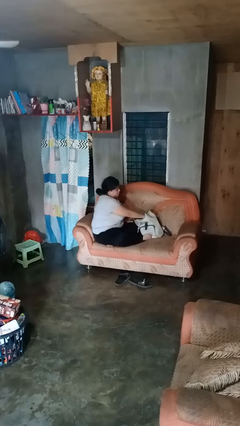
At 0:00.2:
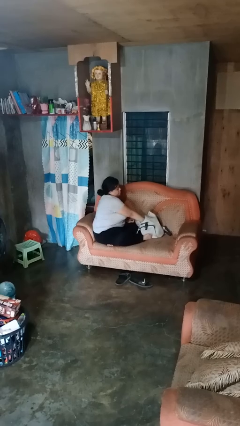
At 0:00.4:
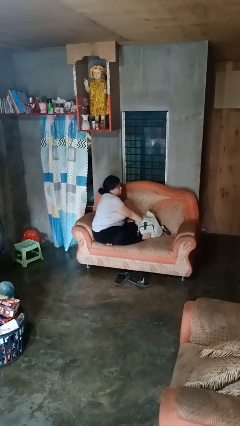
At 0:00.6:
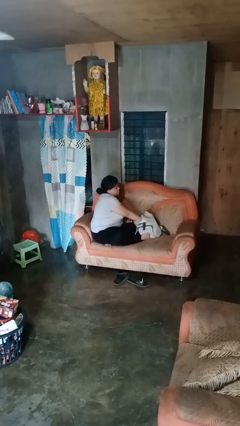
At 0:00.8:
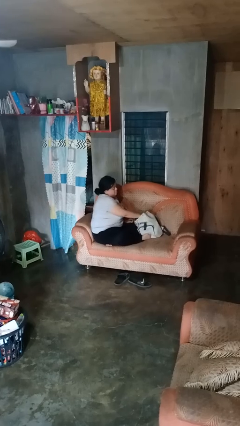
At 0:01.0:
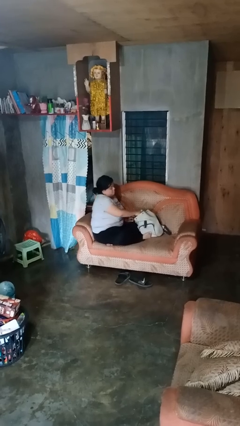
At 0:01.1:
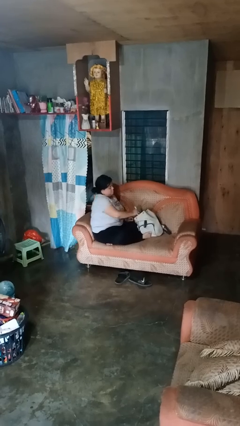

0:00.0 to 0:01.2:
person takes object from backpack

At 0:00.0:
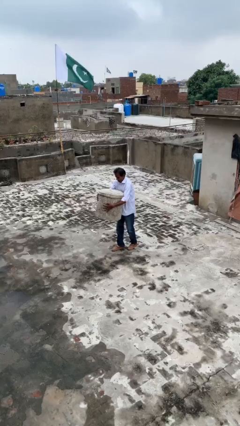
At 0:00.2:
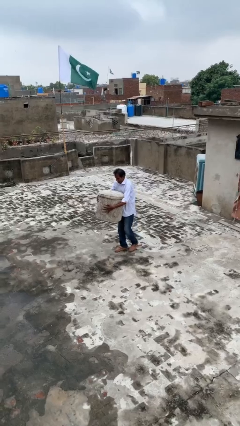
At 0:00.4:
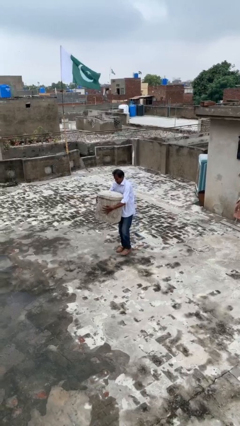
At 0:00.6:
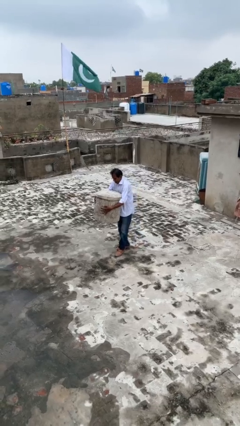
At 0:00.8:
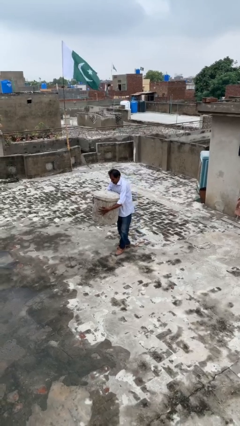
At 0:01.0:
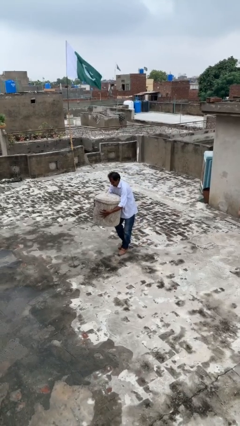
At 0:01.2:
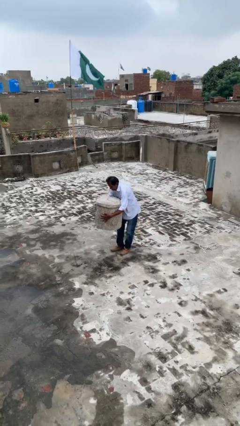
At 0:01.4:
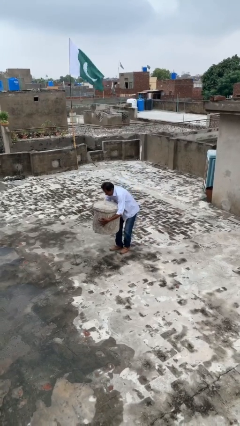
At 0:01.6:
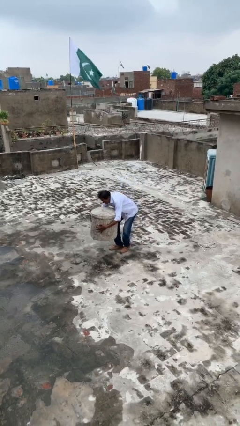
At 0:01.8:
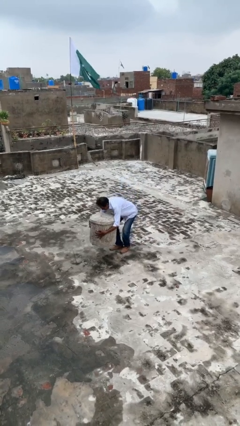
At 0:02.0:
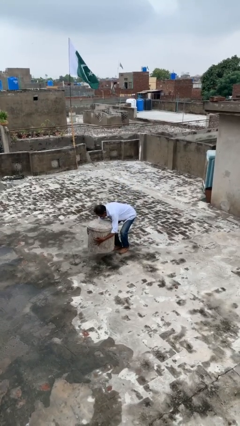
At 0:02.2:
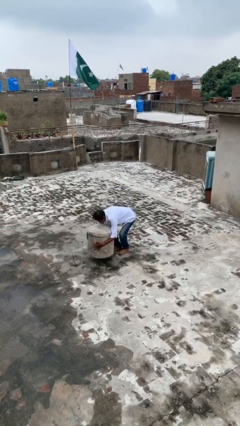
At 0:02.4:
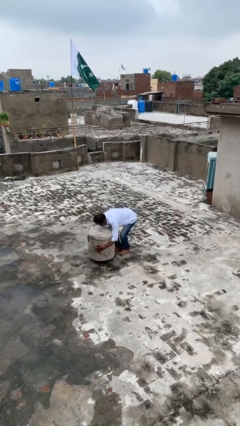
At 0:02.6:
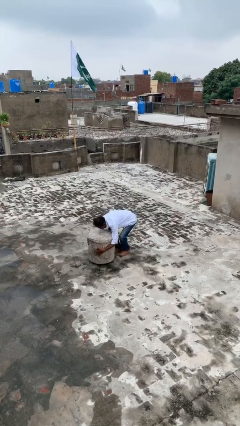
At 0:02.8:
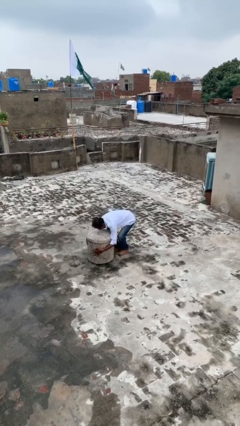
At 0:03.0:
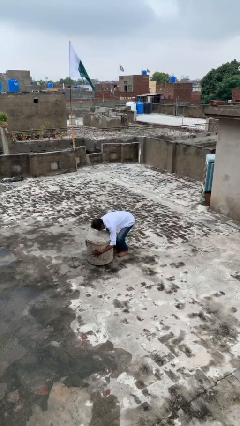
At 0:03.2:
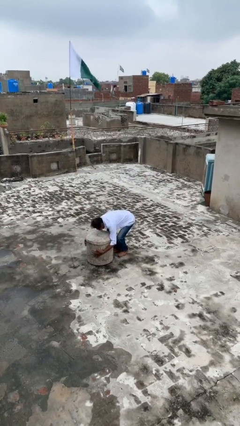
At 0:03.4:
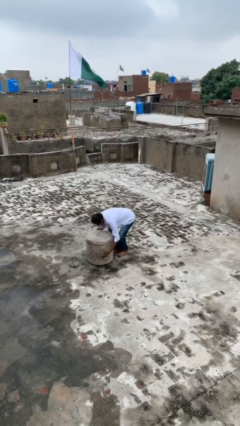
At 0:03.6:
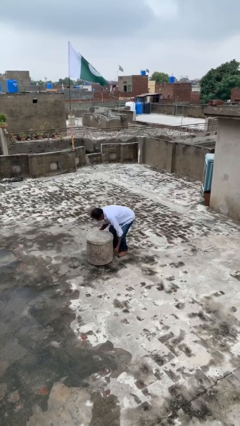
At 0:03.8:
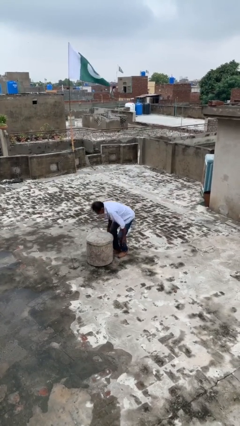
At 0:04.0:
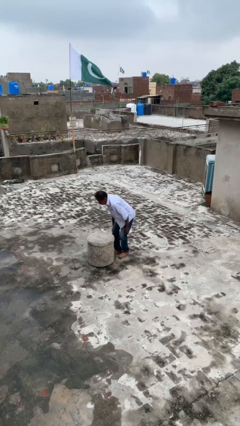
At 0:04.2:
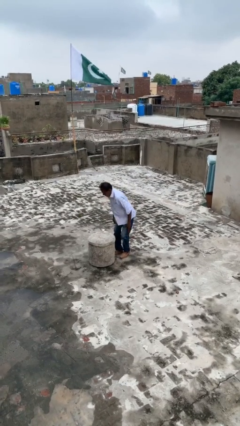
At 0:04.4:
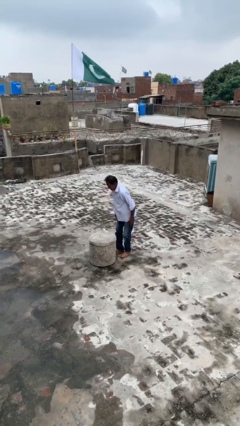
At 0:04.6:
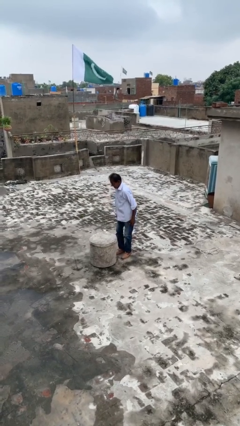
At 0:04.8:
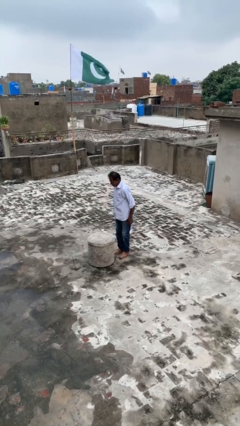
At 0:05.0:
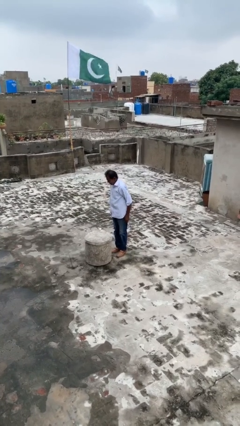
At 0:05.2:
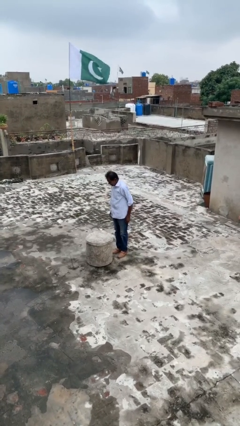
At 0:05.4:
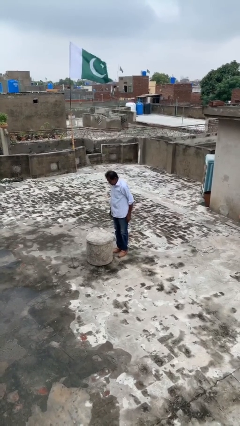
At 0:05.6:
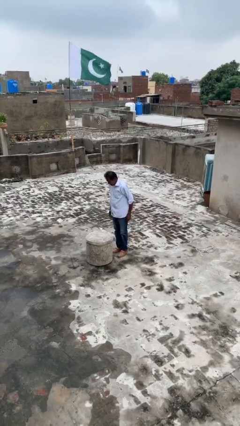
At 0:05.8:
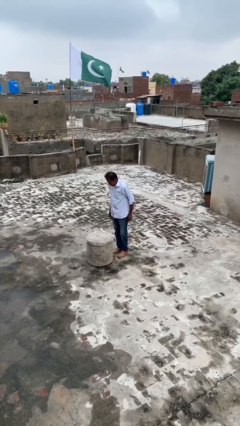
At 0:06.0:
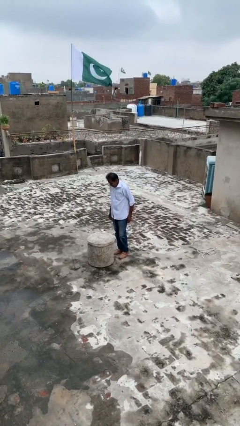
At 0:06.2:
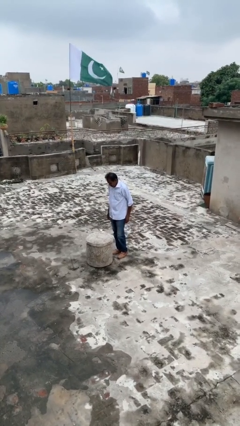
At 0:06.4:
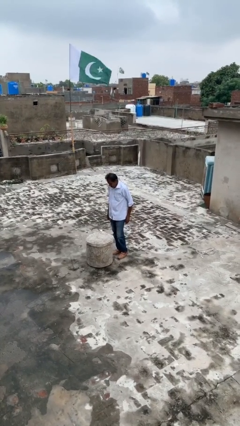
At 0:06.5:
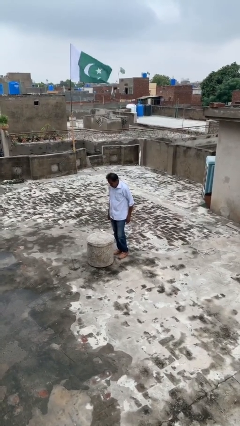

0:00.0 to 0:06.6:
person puts down object on floor

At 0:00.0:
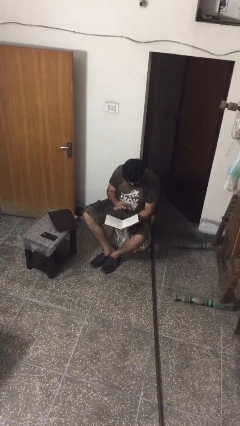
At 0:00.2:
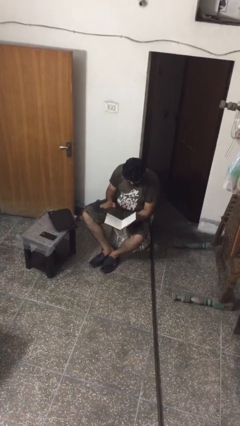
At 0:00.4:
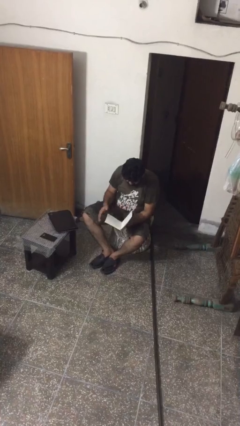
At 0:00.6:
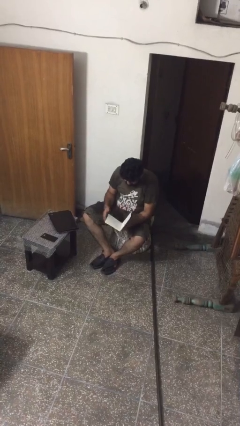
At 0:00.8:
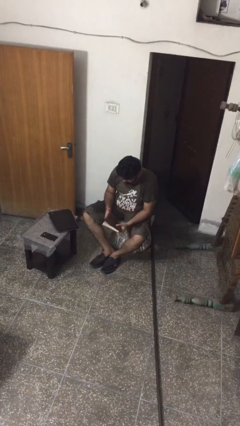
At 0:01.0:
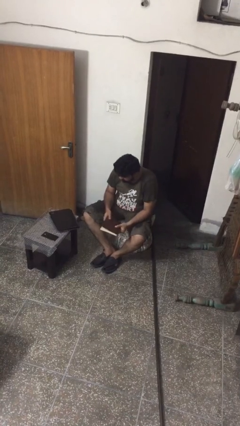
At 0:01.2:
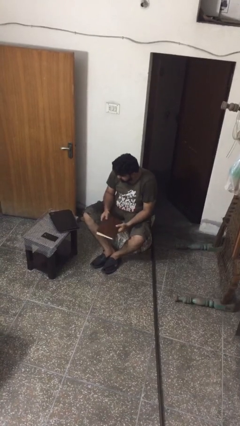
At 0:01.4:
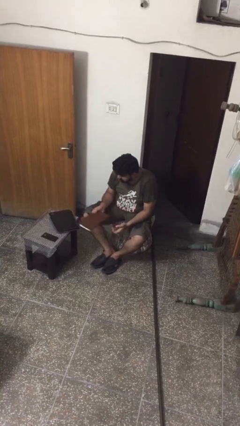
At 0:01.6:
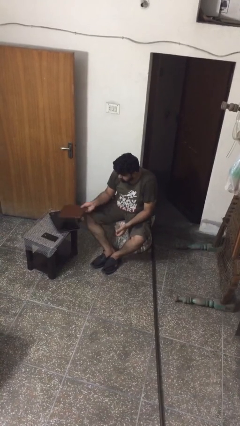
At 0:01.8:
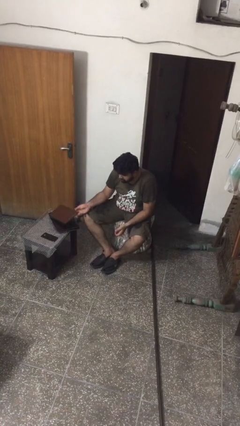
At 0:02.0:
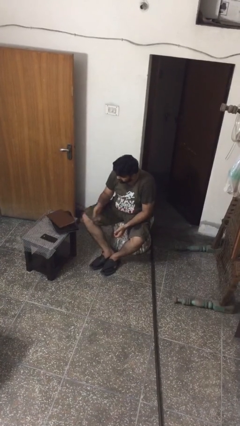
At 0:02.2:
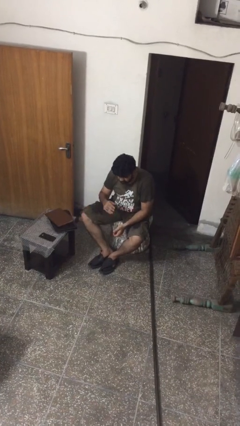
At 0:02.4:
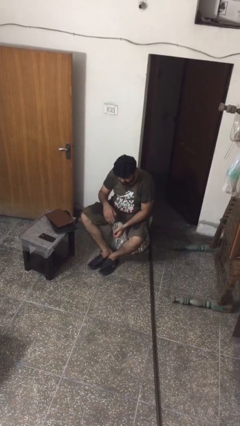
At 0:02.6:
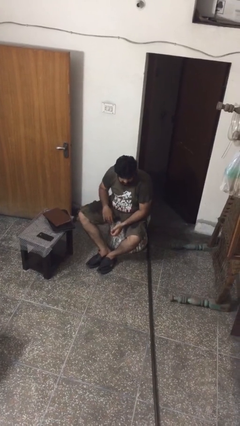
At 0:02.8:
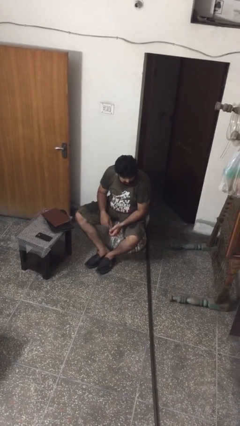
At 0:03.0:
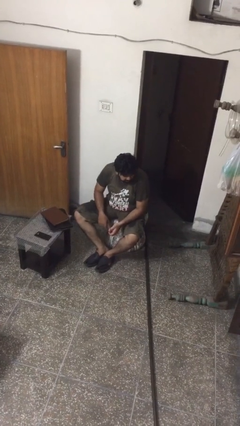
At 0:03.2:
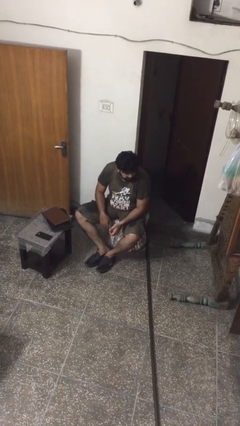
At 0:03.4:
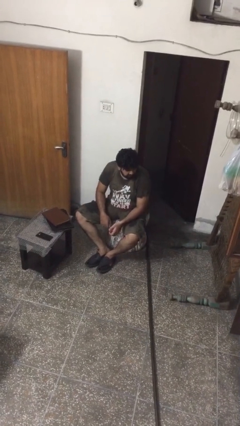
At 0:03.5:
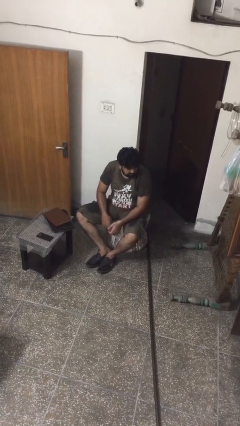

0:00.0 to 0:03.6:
person puts down object on table

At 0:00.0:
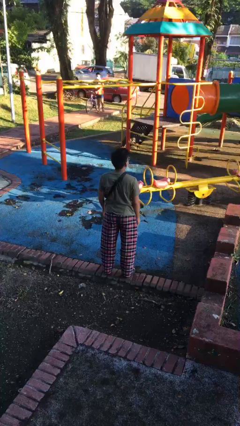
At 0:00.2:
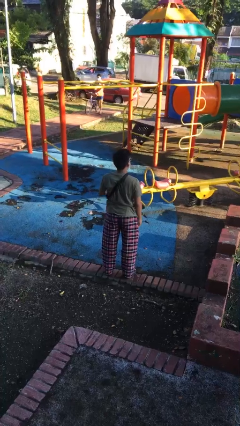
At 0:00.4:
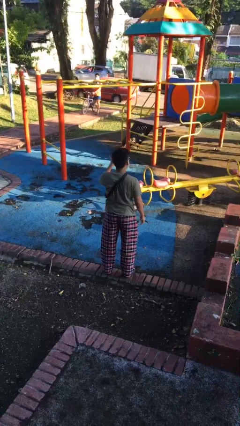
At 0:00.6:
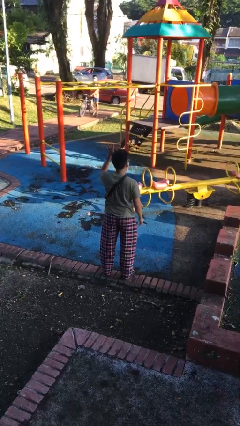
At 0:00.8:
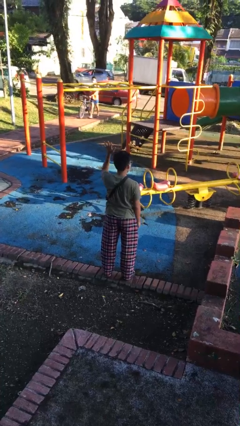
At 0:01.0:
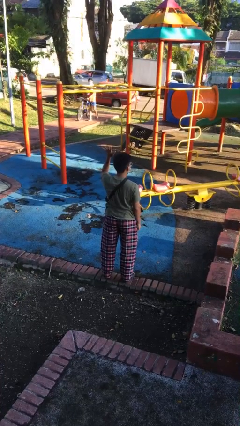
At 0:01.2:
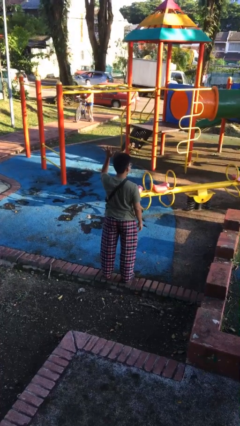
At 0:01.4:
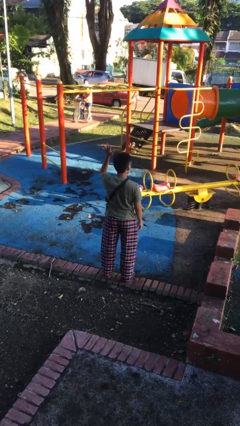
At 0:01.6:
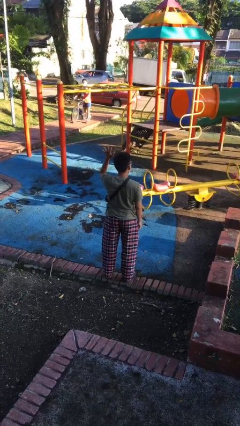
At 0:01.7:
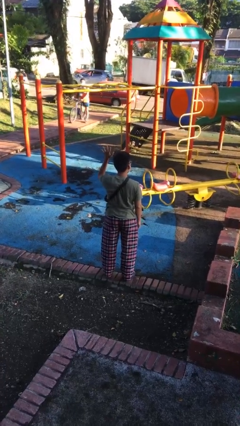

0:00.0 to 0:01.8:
person gestures number five

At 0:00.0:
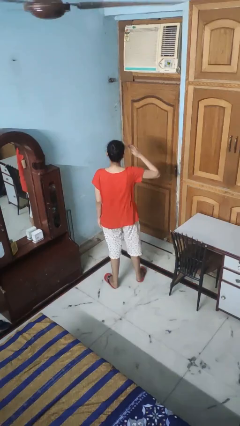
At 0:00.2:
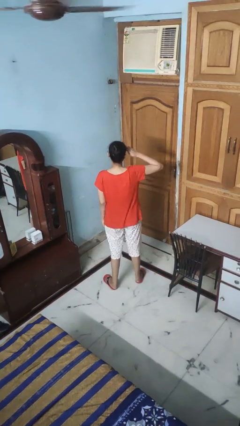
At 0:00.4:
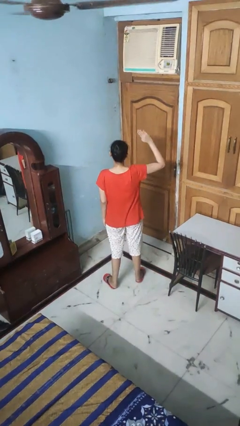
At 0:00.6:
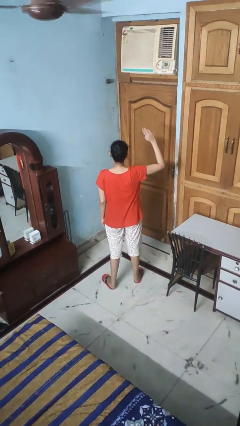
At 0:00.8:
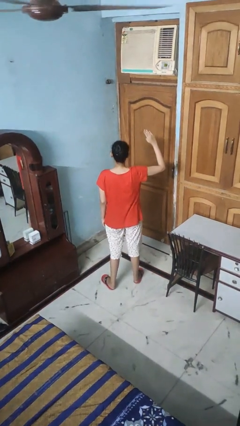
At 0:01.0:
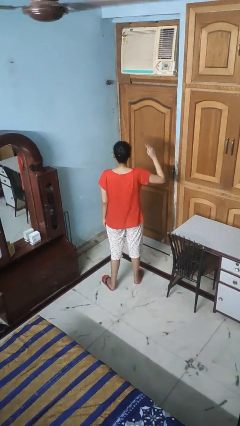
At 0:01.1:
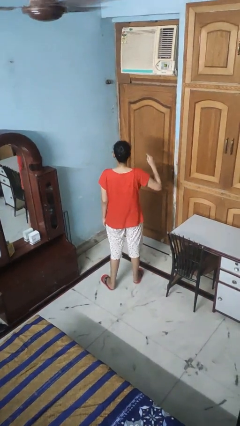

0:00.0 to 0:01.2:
person salutes

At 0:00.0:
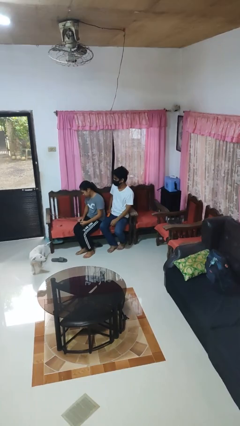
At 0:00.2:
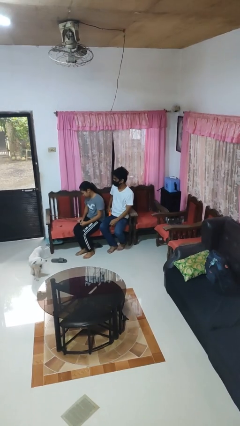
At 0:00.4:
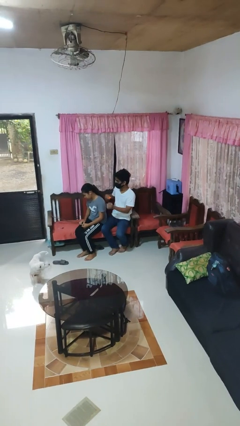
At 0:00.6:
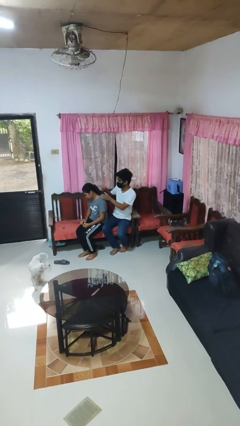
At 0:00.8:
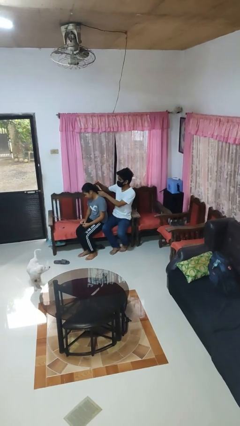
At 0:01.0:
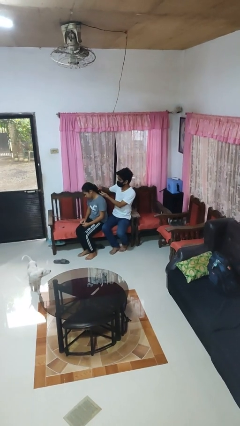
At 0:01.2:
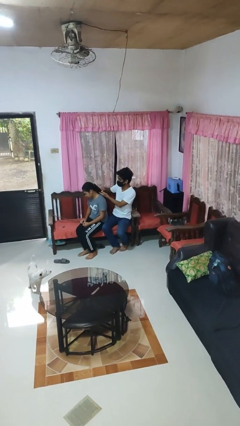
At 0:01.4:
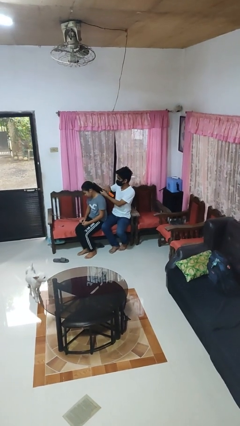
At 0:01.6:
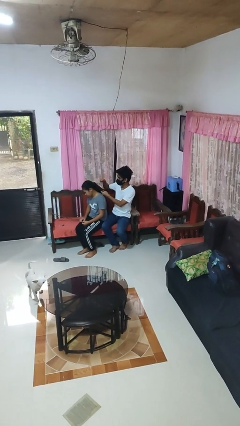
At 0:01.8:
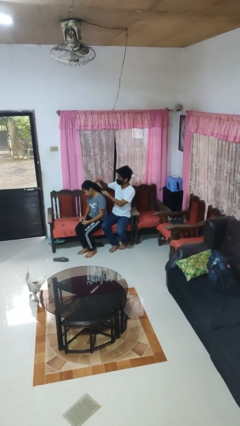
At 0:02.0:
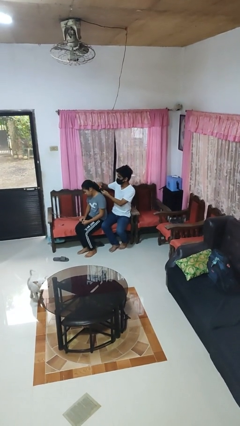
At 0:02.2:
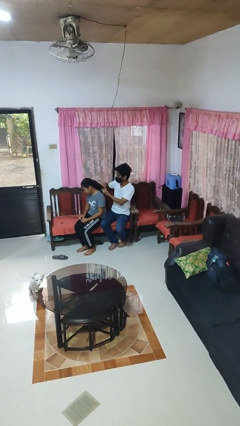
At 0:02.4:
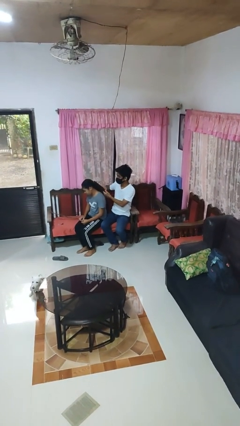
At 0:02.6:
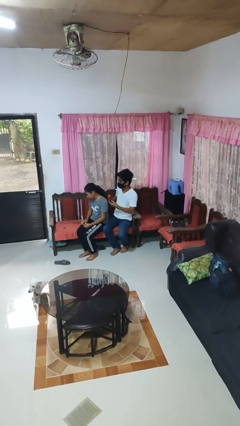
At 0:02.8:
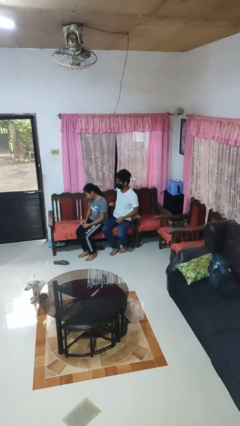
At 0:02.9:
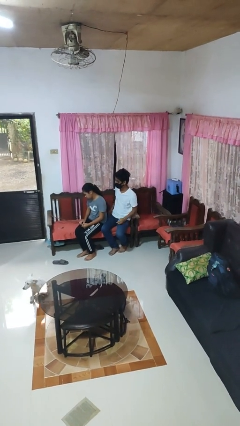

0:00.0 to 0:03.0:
person brushes hair of person
